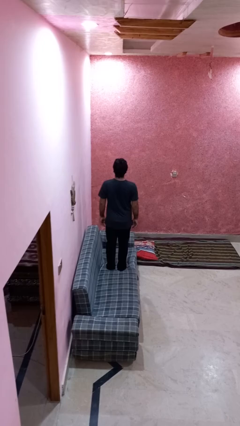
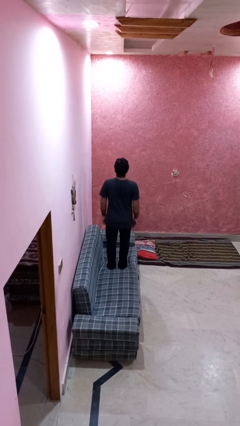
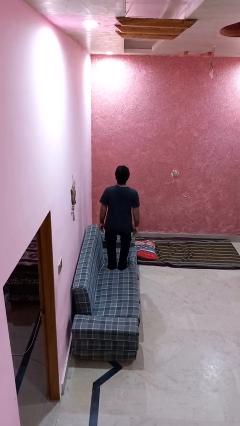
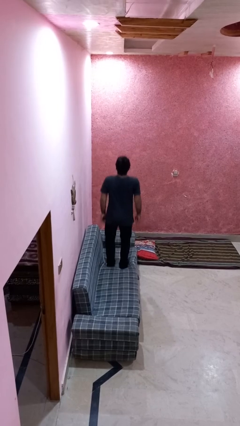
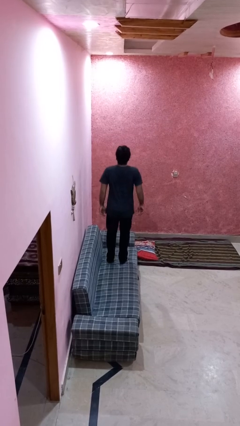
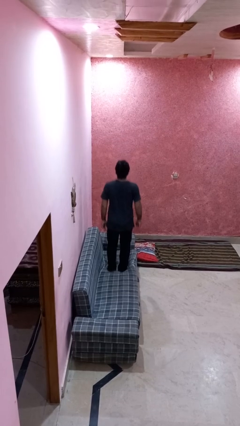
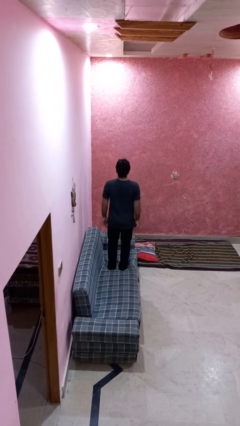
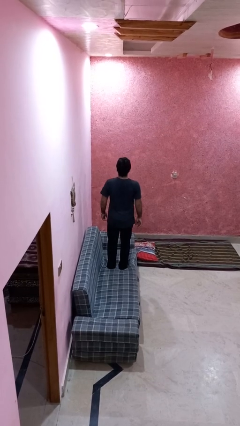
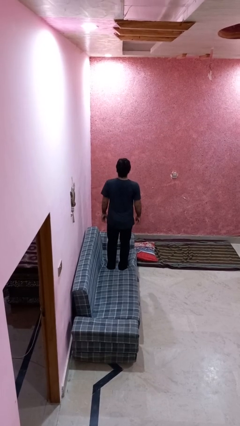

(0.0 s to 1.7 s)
person jumps on couch

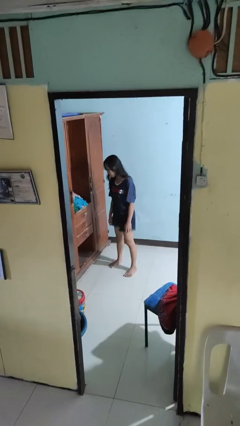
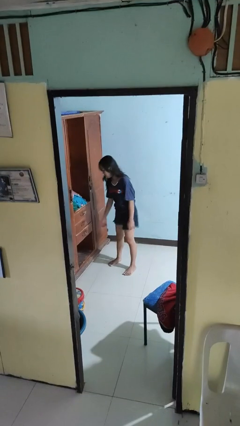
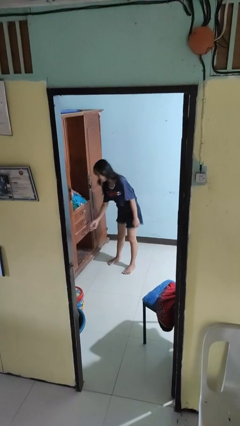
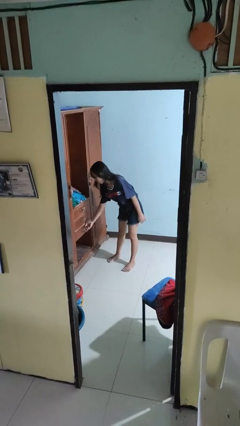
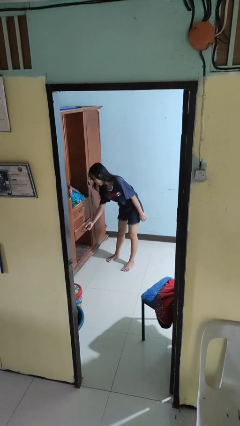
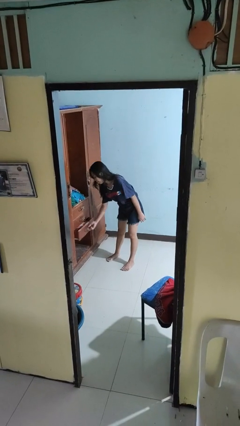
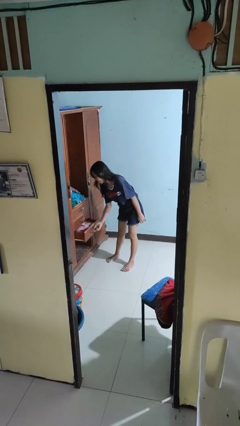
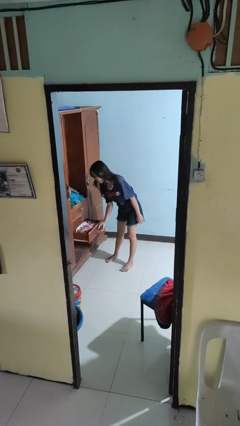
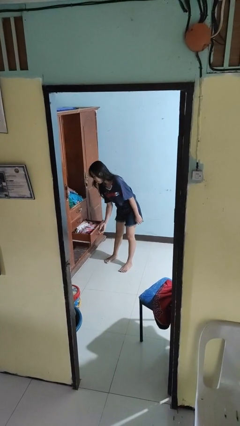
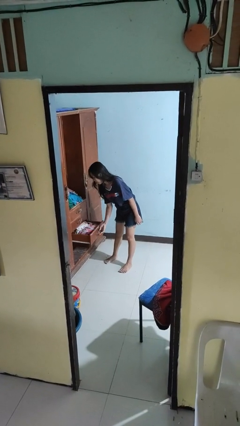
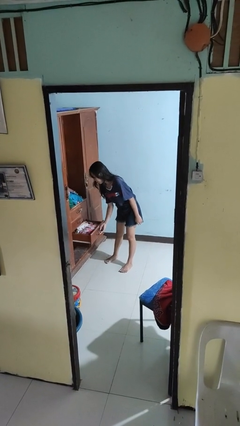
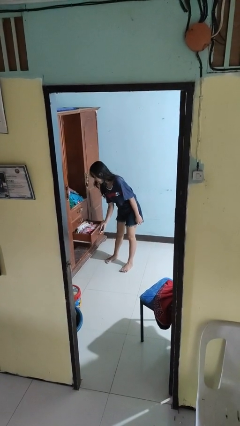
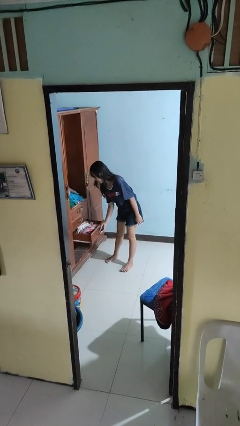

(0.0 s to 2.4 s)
person opens dresser drawer

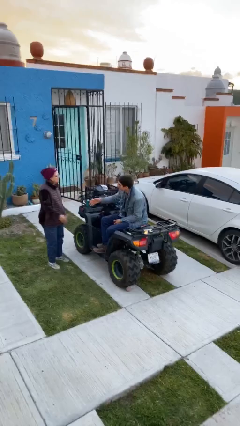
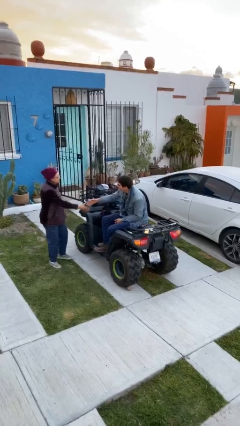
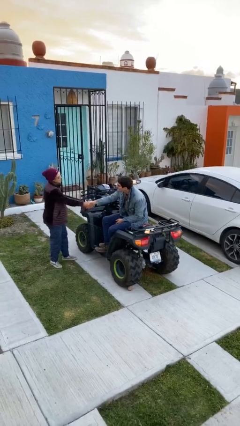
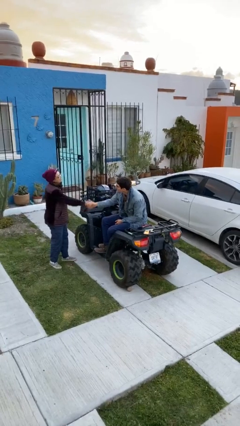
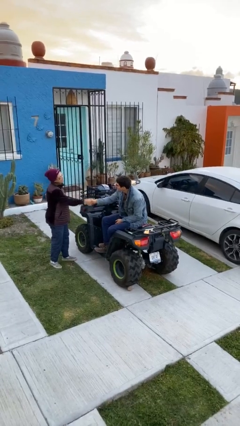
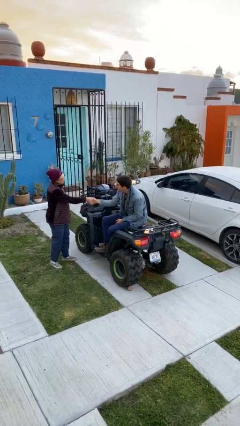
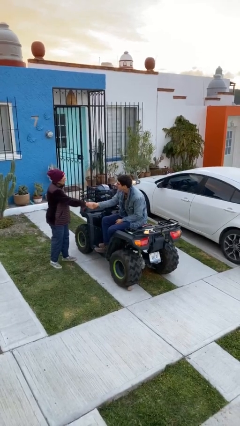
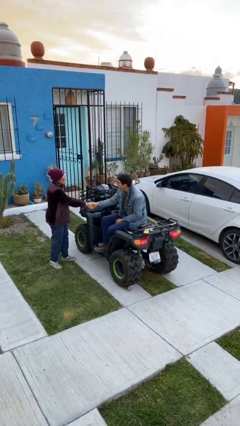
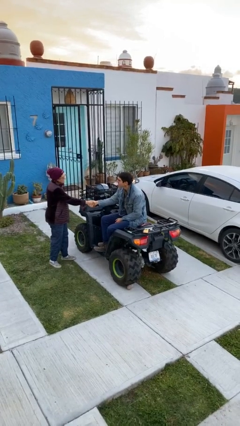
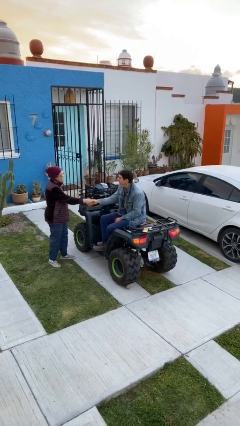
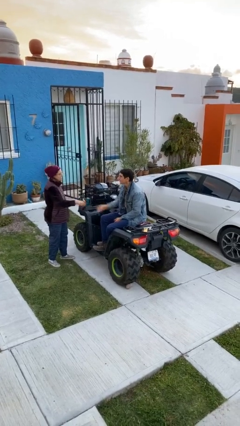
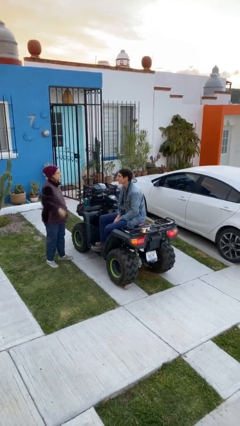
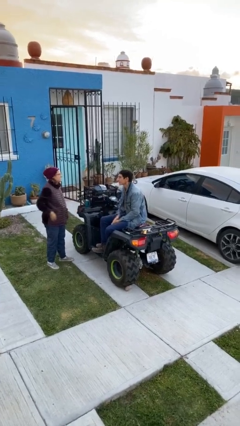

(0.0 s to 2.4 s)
person shakes hand

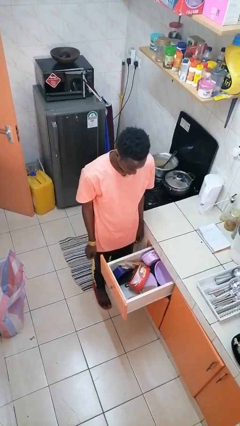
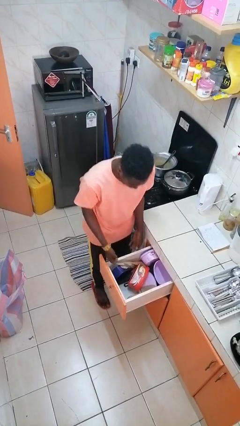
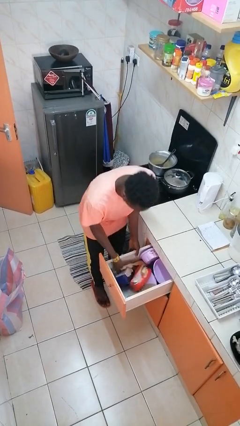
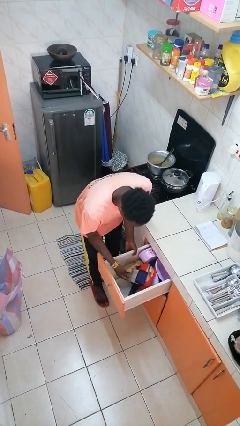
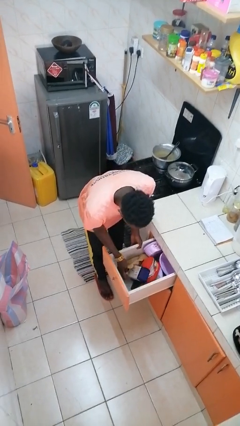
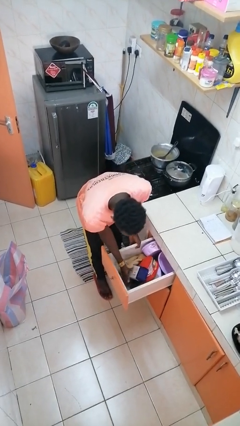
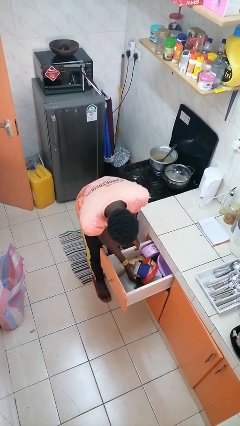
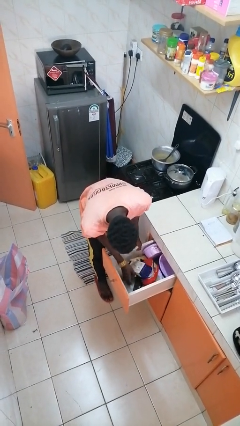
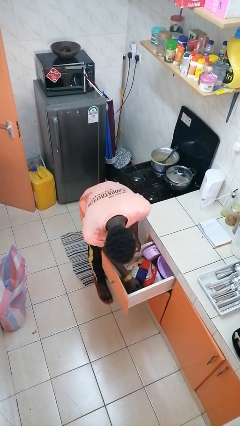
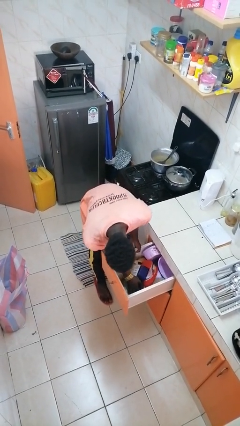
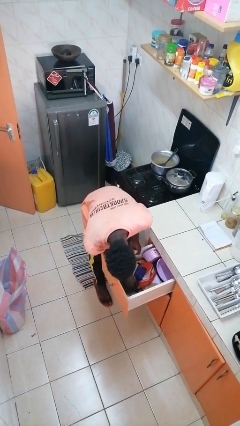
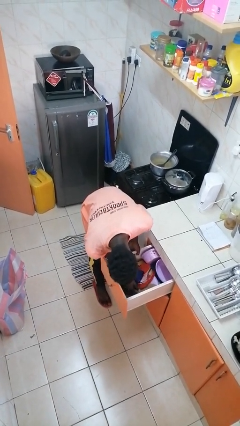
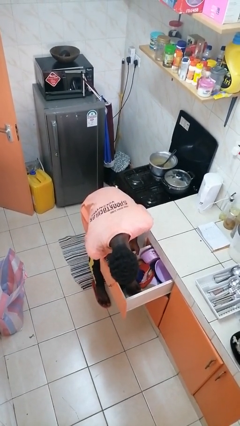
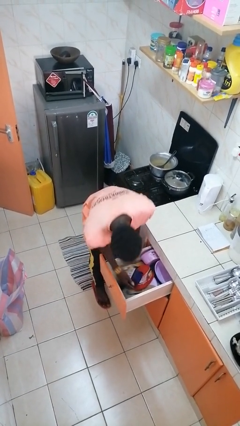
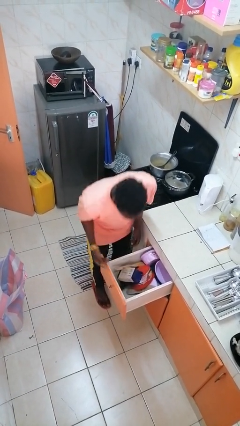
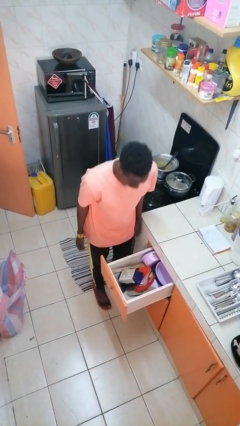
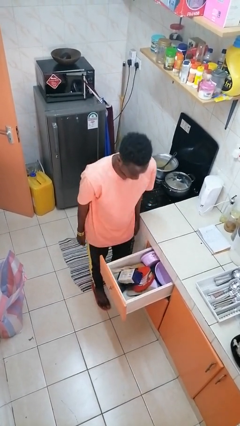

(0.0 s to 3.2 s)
person searches in kitchen drawer

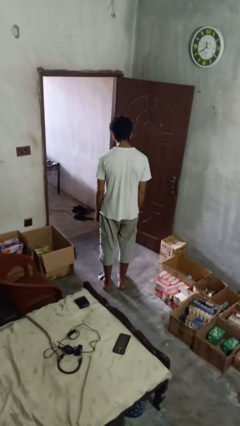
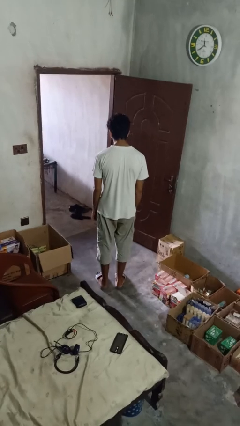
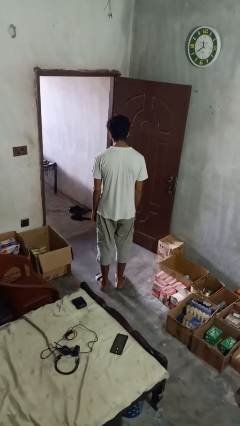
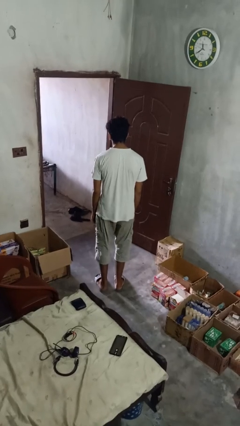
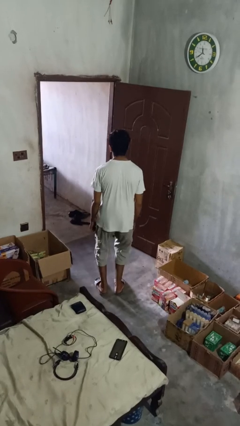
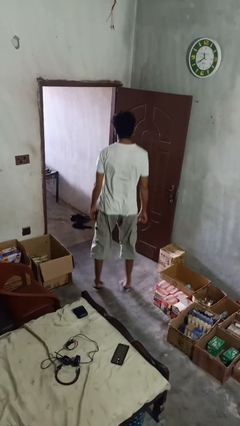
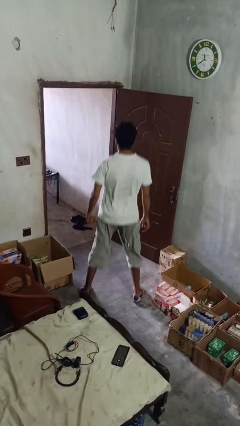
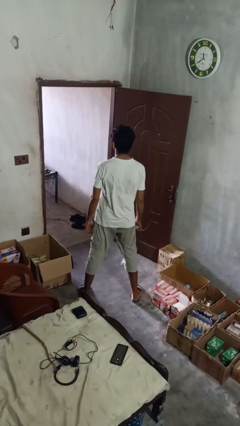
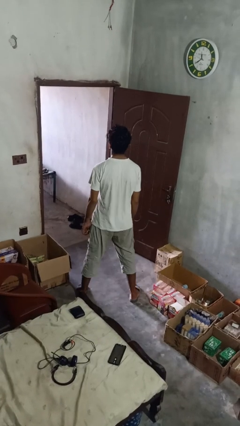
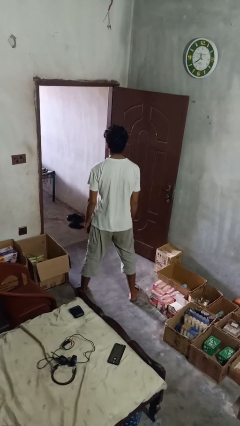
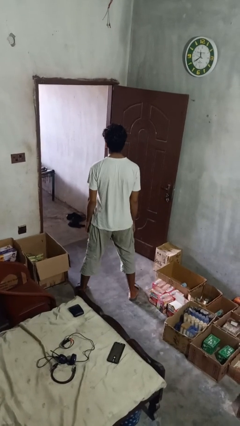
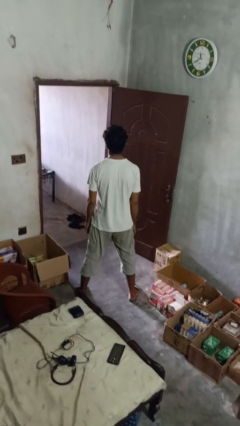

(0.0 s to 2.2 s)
person stretches back

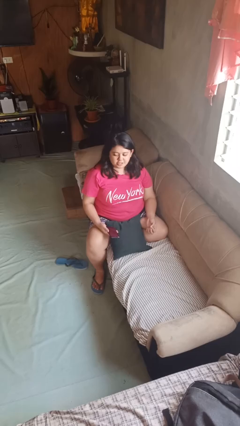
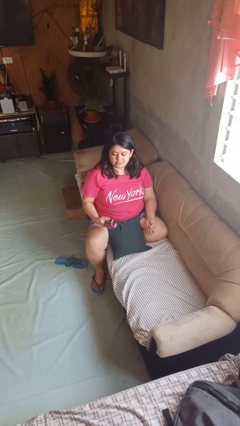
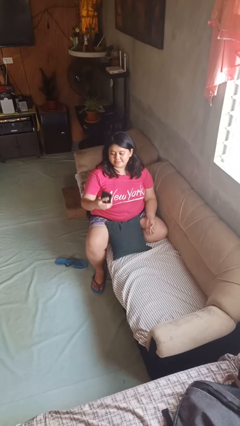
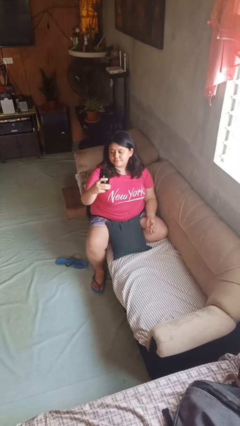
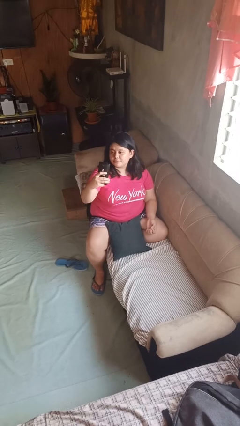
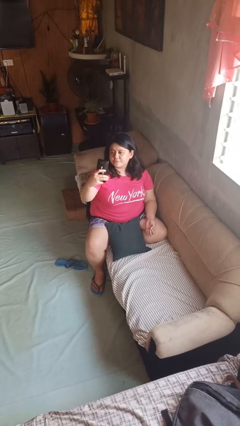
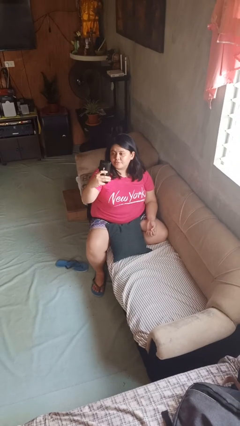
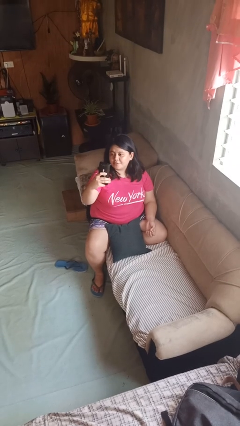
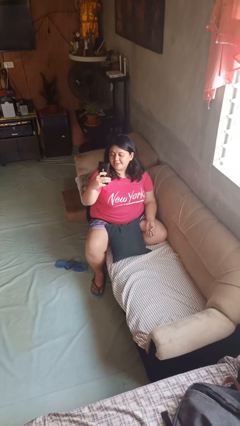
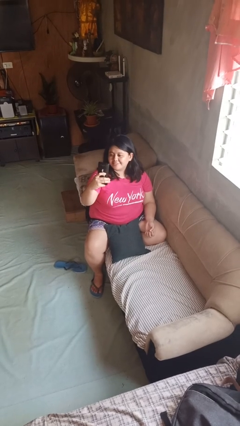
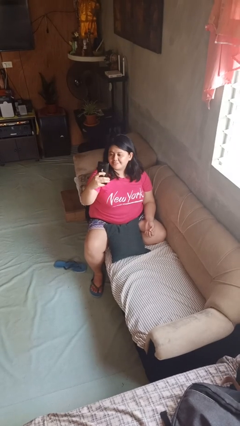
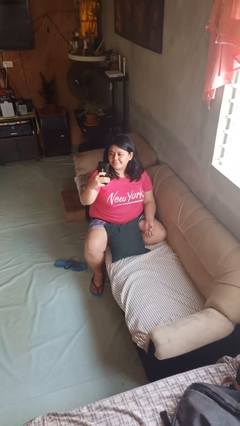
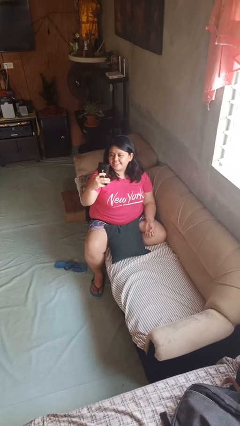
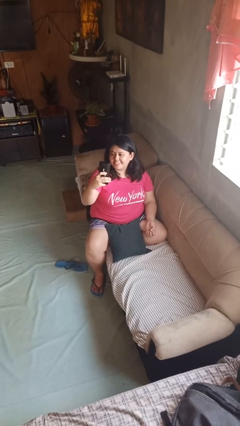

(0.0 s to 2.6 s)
person takes selfie

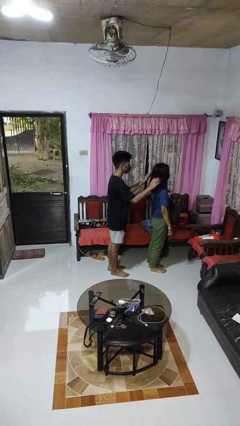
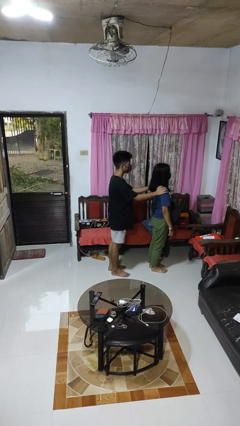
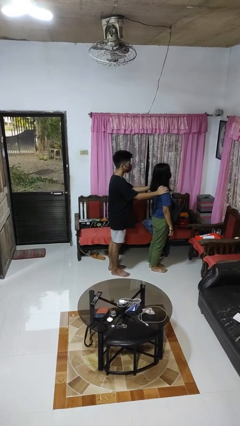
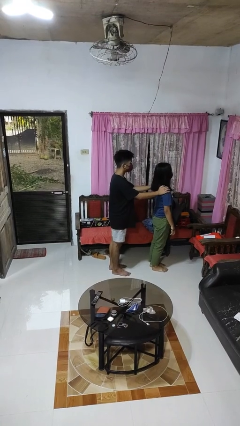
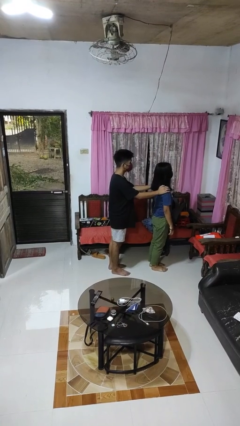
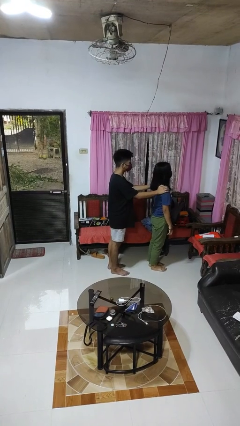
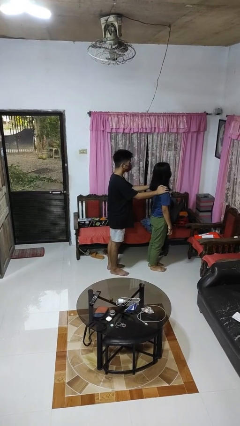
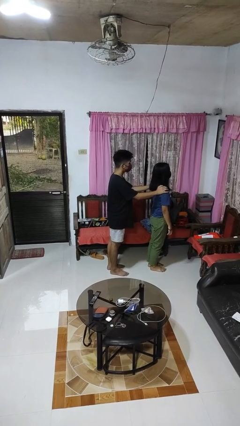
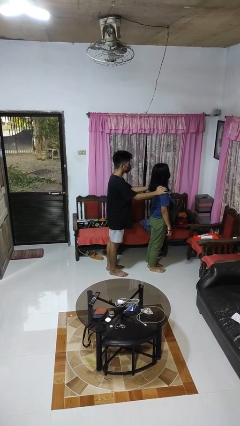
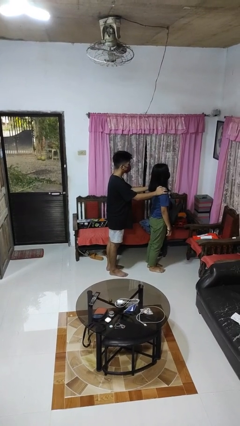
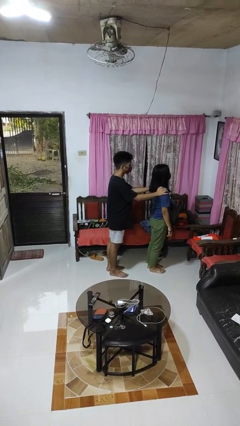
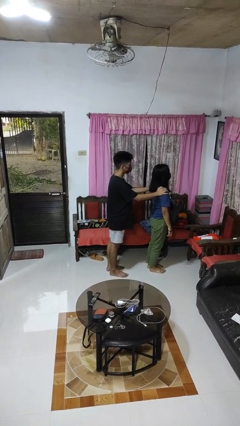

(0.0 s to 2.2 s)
person grabs person by shoulder

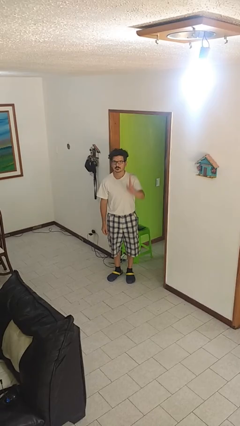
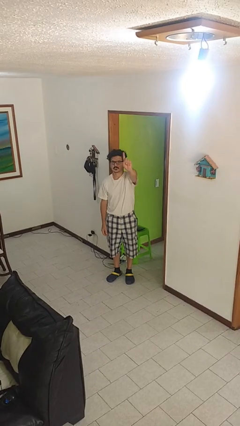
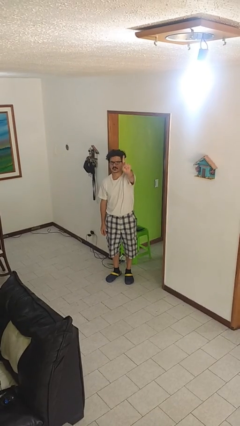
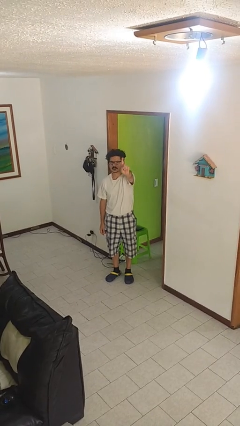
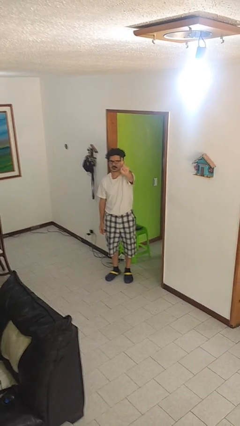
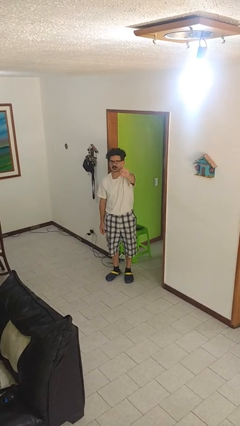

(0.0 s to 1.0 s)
person gestures number one
